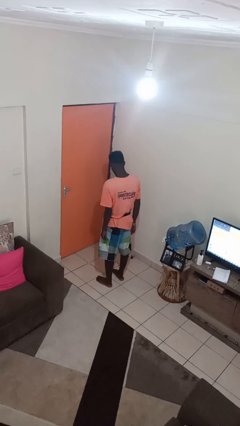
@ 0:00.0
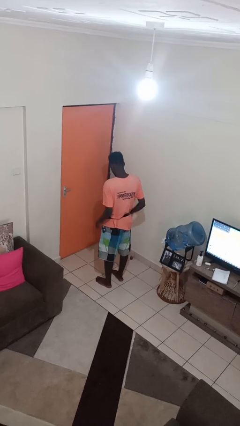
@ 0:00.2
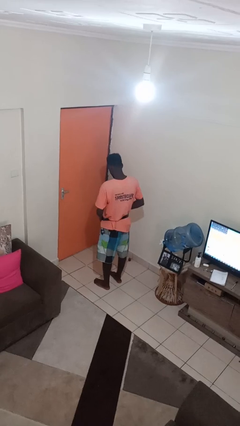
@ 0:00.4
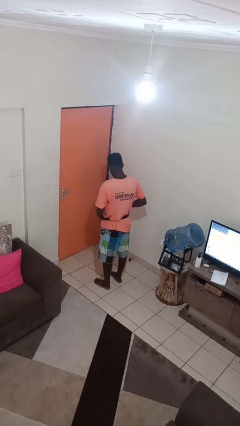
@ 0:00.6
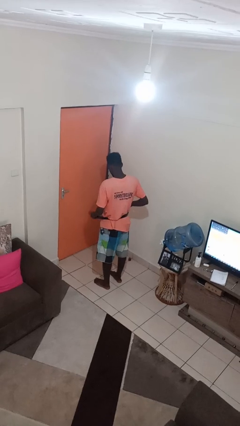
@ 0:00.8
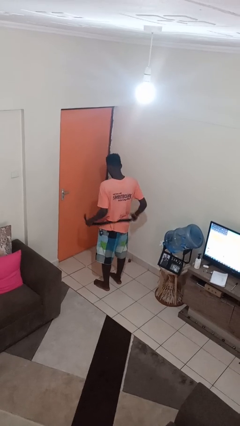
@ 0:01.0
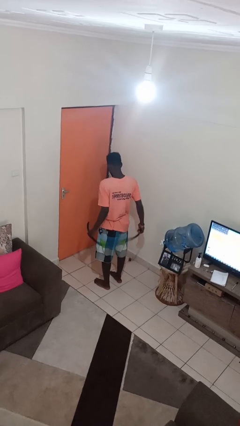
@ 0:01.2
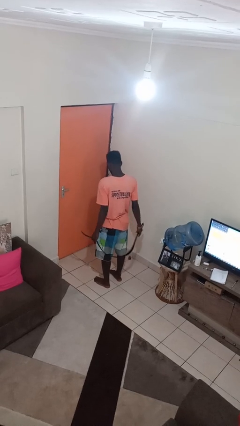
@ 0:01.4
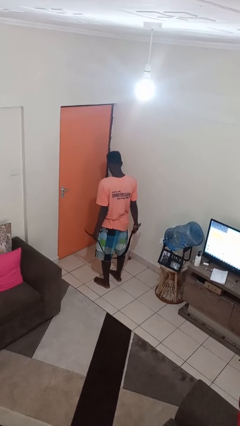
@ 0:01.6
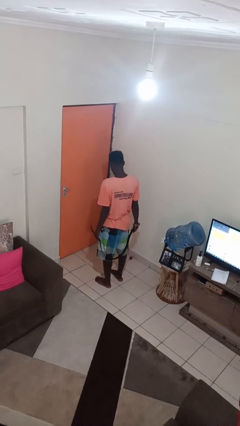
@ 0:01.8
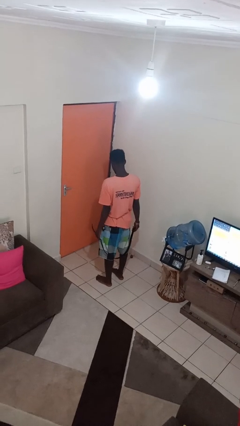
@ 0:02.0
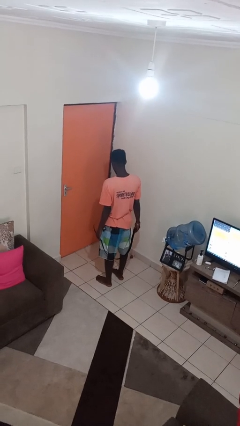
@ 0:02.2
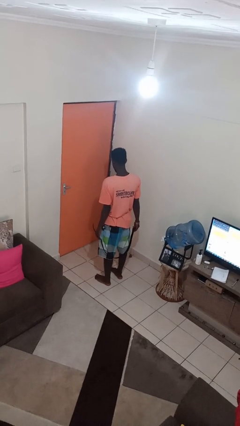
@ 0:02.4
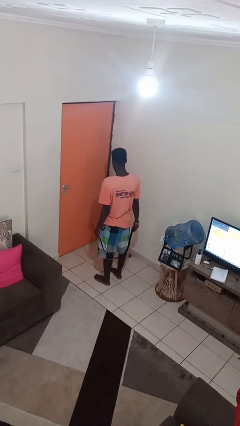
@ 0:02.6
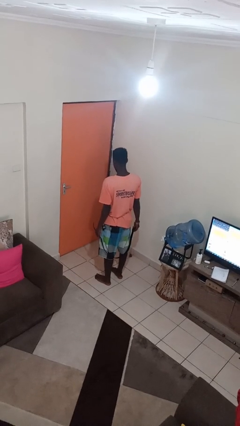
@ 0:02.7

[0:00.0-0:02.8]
person takes off belt

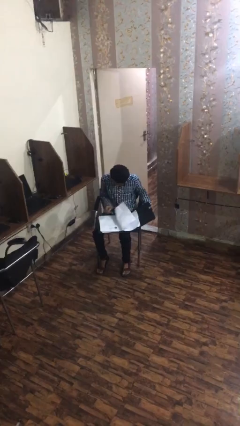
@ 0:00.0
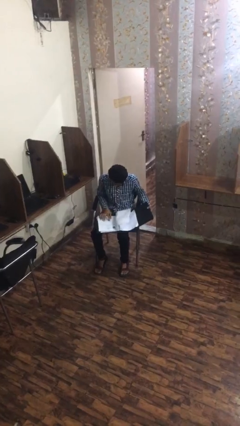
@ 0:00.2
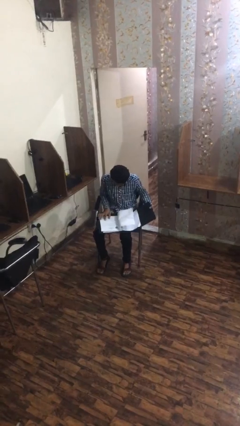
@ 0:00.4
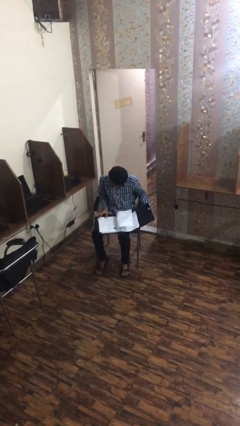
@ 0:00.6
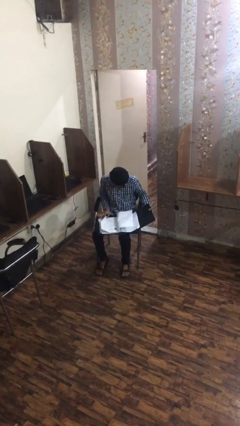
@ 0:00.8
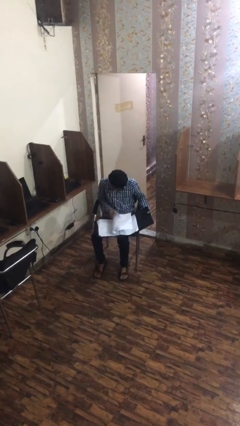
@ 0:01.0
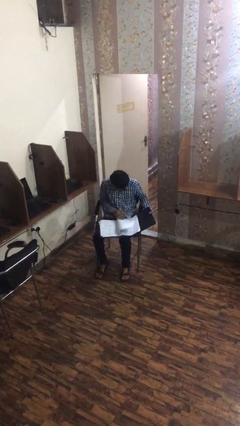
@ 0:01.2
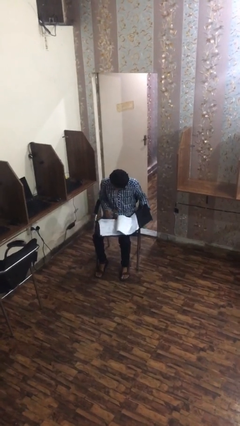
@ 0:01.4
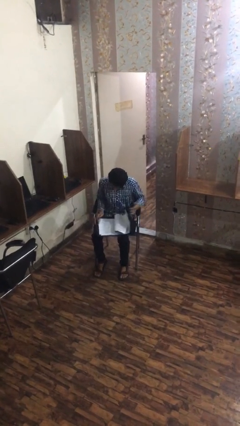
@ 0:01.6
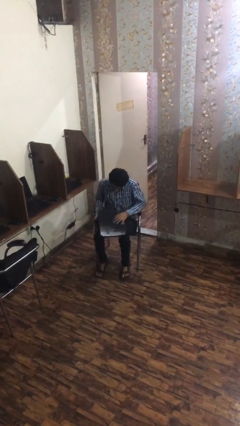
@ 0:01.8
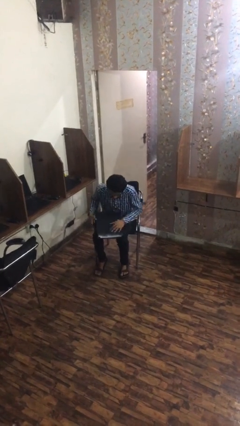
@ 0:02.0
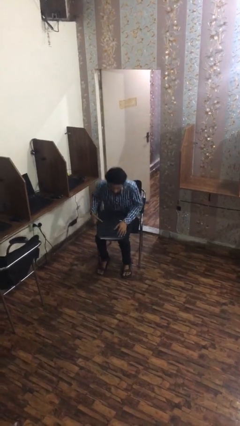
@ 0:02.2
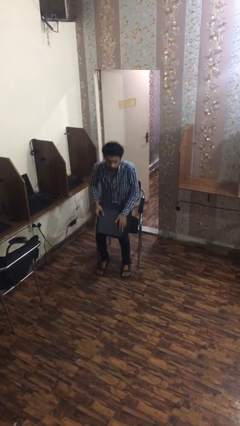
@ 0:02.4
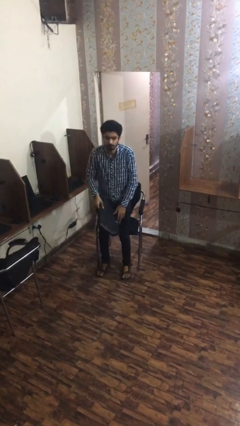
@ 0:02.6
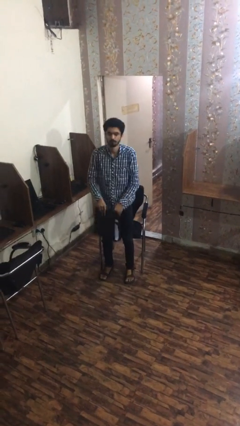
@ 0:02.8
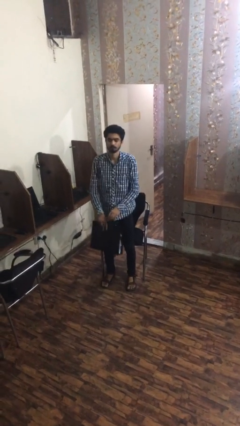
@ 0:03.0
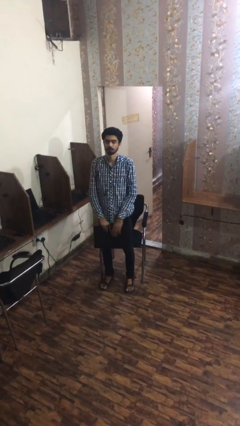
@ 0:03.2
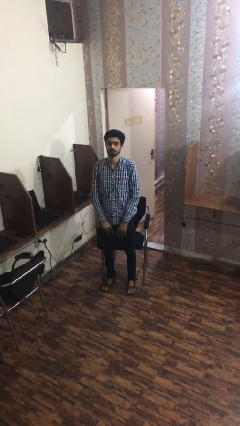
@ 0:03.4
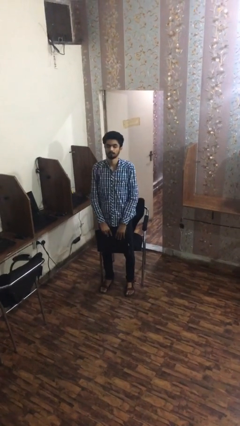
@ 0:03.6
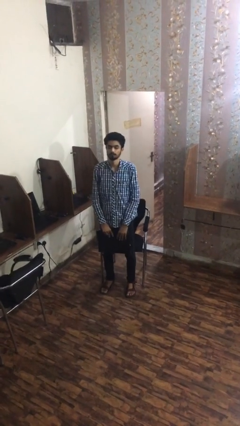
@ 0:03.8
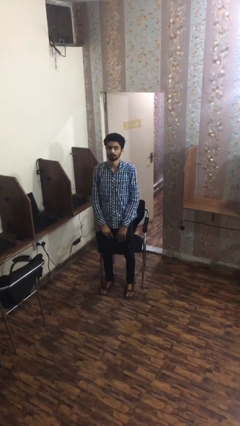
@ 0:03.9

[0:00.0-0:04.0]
person stands up

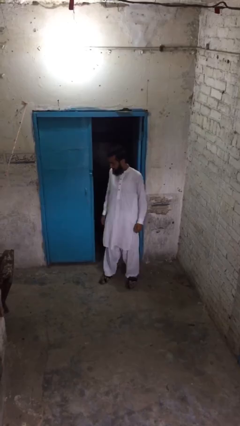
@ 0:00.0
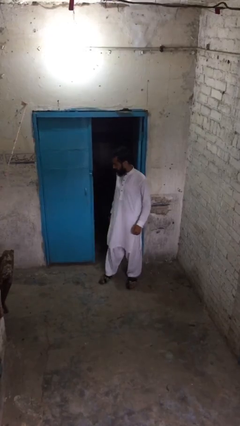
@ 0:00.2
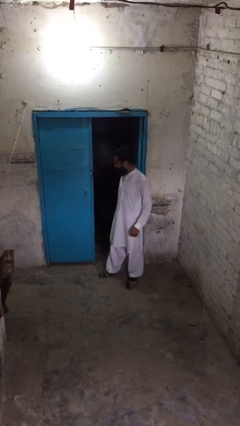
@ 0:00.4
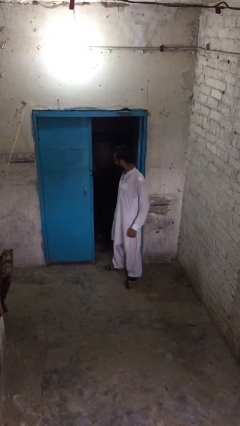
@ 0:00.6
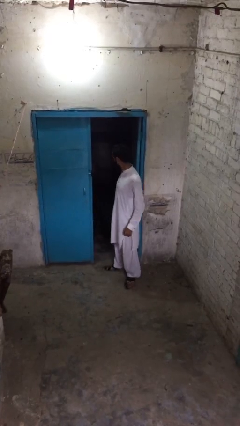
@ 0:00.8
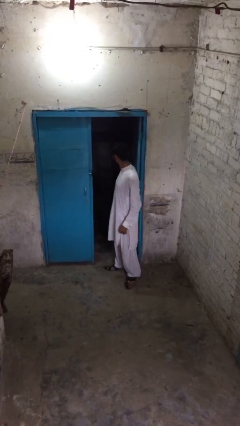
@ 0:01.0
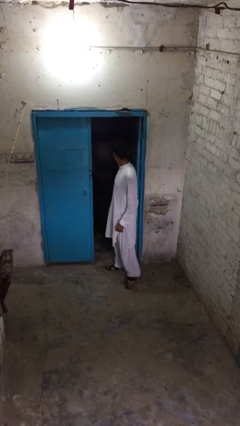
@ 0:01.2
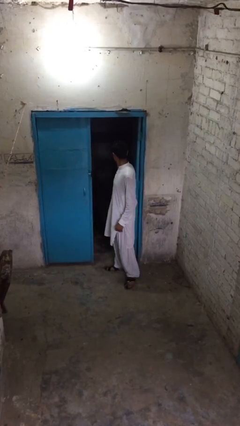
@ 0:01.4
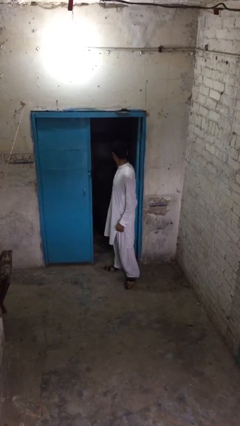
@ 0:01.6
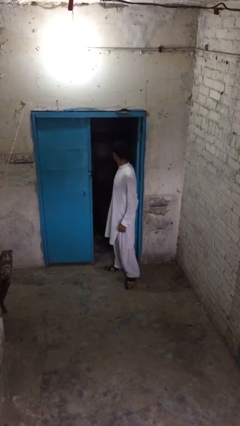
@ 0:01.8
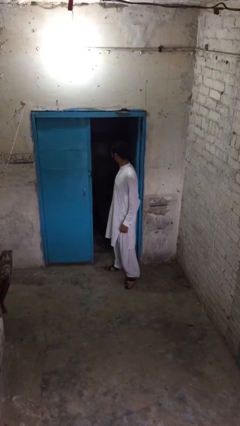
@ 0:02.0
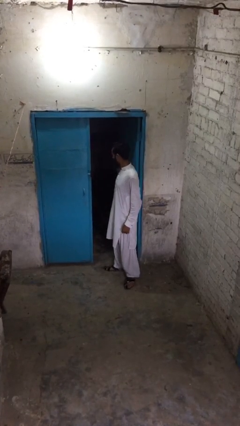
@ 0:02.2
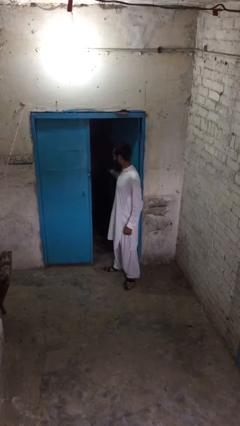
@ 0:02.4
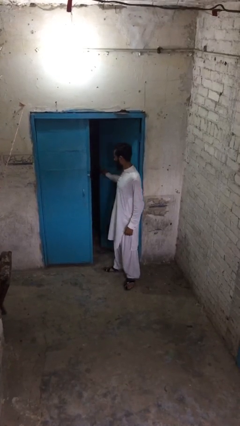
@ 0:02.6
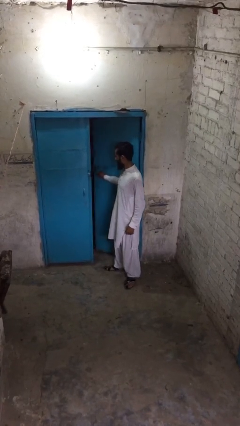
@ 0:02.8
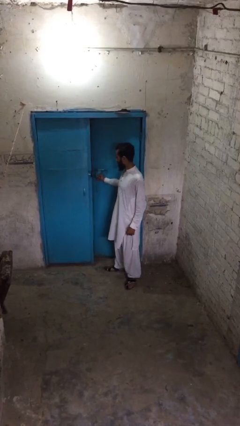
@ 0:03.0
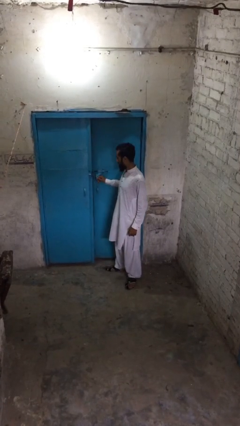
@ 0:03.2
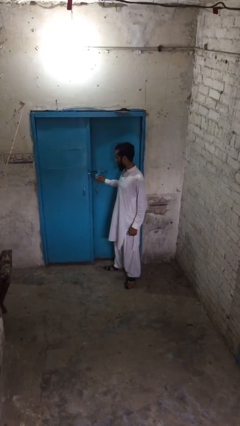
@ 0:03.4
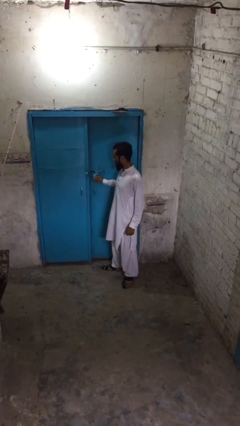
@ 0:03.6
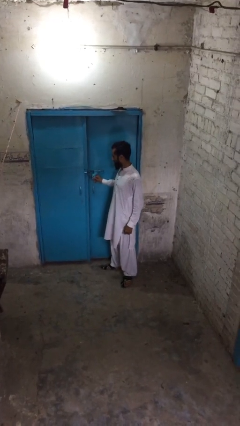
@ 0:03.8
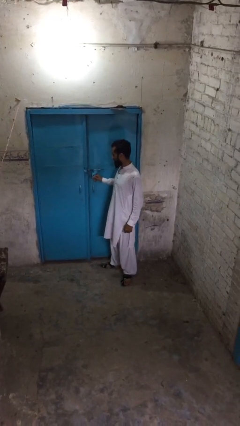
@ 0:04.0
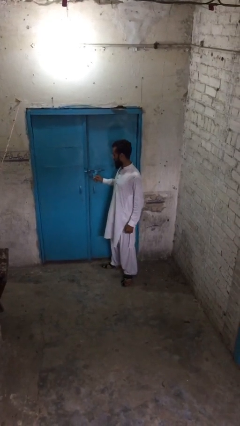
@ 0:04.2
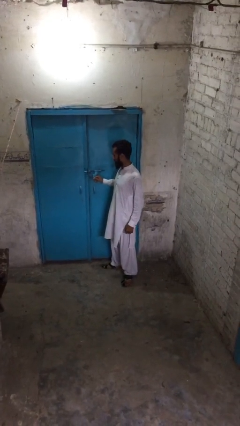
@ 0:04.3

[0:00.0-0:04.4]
person closes facility door

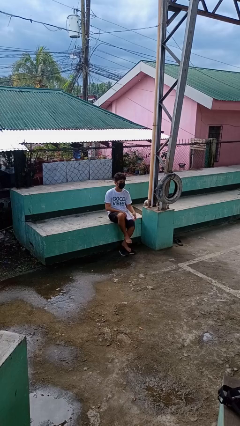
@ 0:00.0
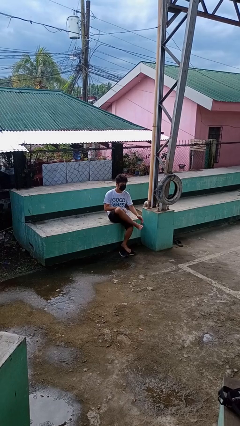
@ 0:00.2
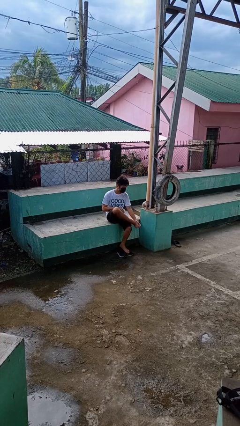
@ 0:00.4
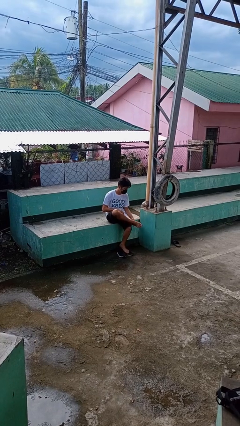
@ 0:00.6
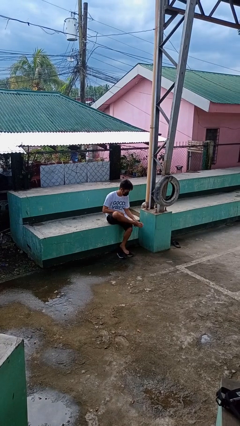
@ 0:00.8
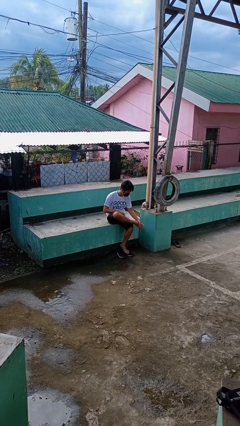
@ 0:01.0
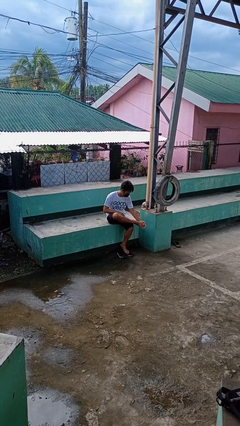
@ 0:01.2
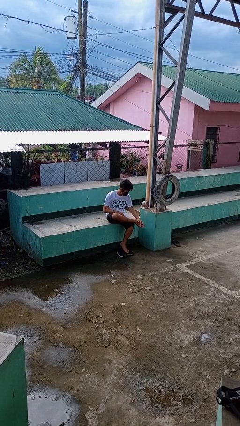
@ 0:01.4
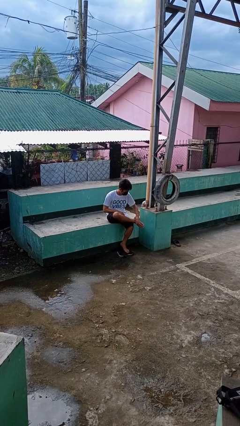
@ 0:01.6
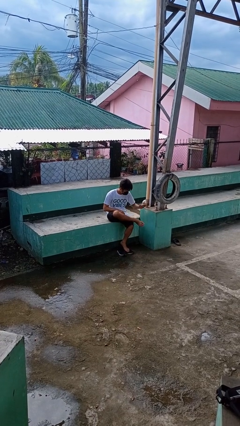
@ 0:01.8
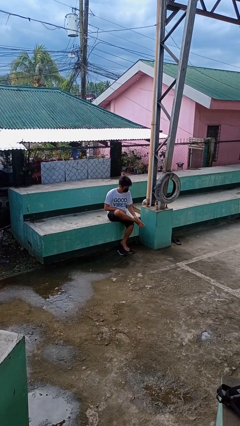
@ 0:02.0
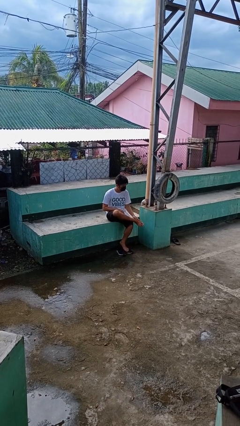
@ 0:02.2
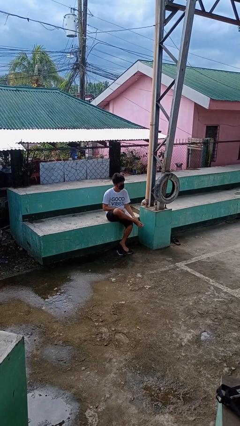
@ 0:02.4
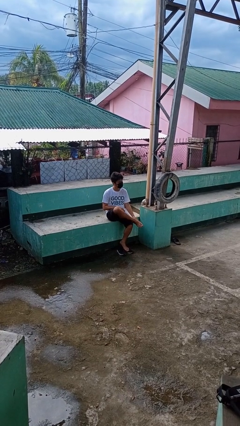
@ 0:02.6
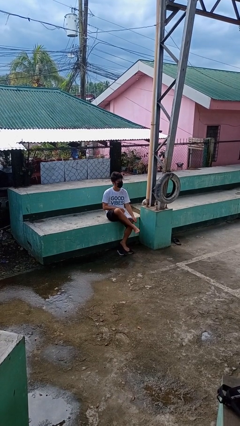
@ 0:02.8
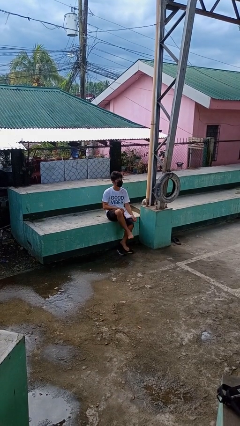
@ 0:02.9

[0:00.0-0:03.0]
person rubs foot

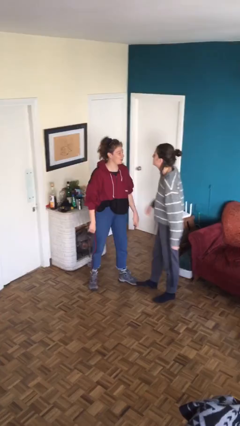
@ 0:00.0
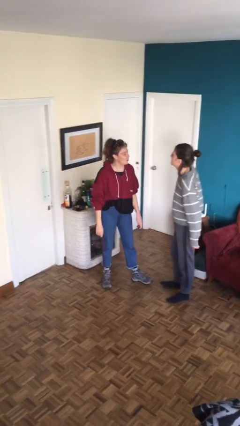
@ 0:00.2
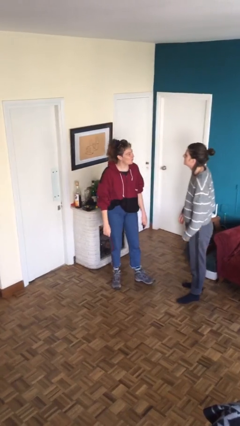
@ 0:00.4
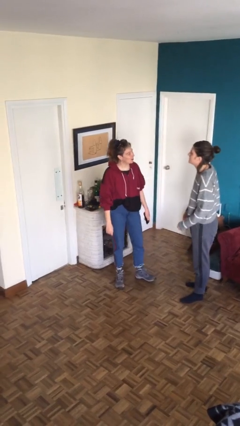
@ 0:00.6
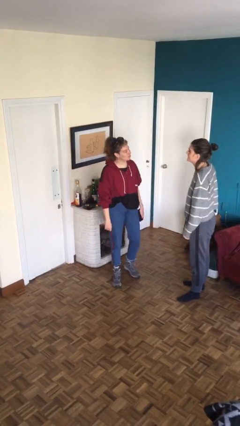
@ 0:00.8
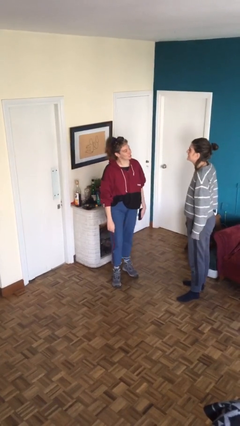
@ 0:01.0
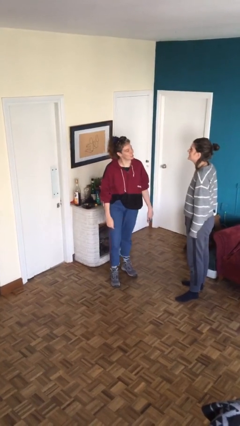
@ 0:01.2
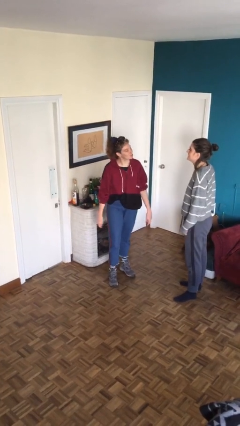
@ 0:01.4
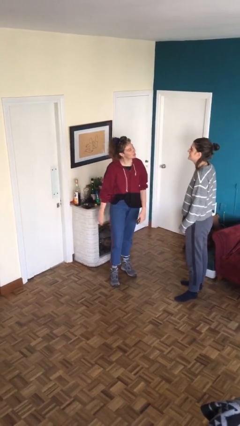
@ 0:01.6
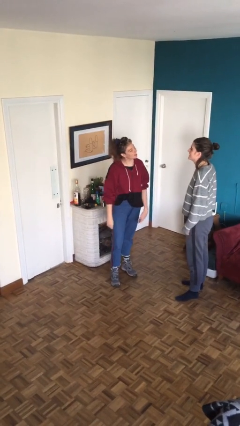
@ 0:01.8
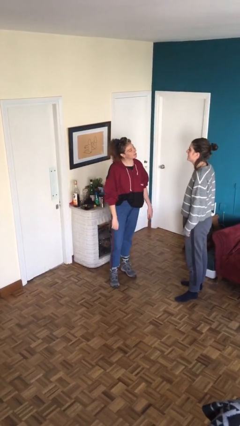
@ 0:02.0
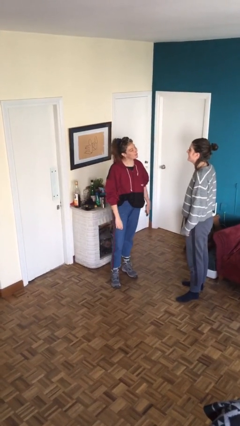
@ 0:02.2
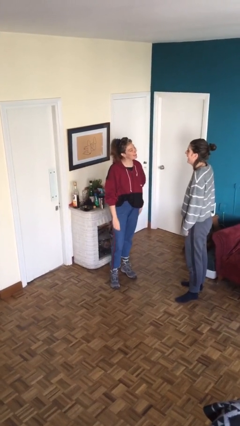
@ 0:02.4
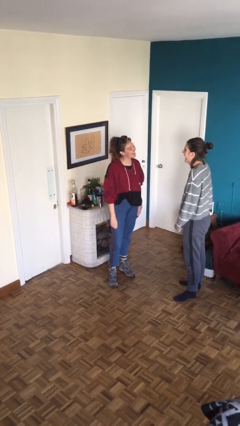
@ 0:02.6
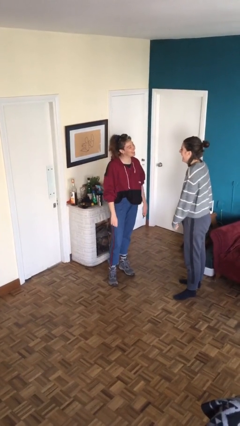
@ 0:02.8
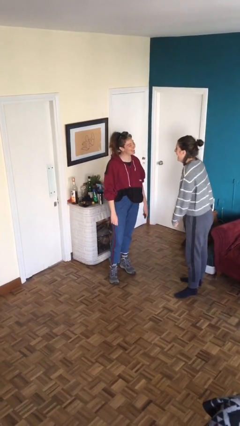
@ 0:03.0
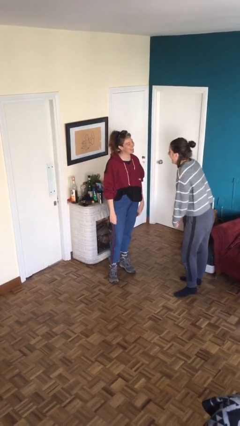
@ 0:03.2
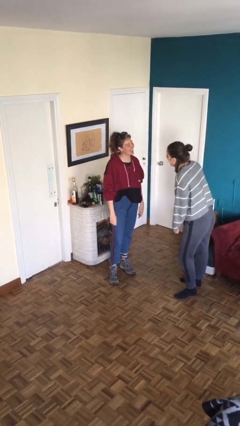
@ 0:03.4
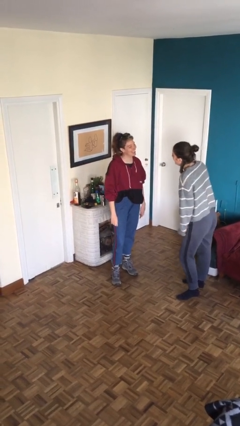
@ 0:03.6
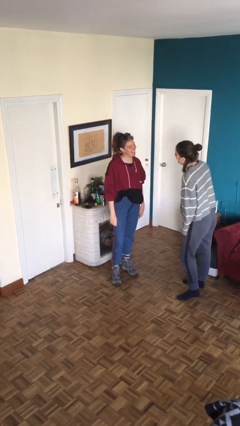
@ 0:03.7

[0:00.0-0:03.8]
person talks to person
